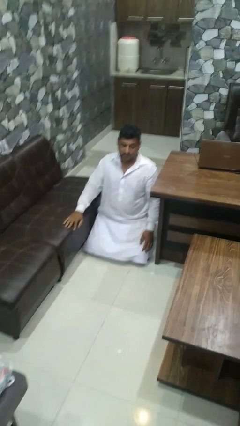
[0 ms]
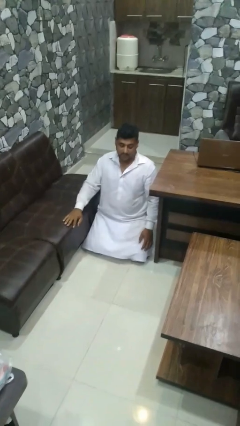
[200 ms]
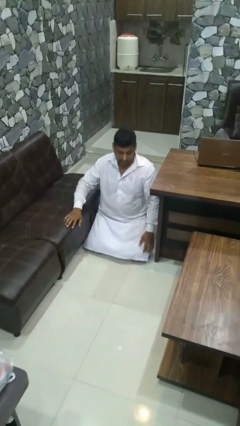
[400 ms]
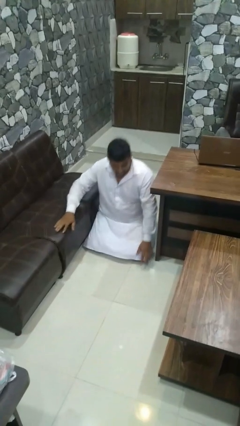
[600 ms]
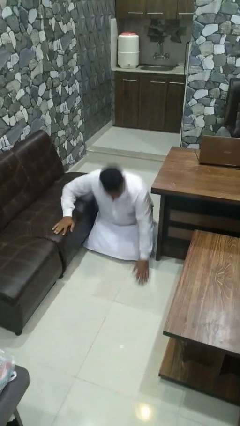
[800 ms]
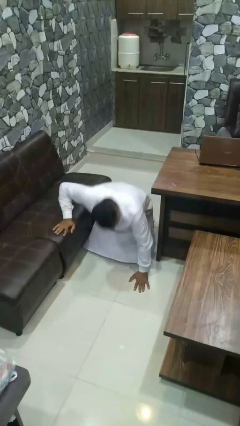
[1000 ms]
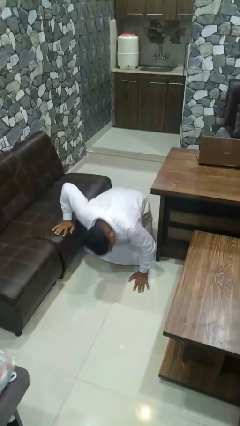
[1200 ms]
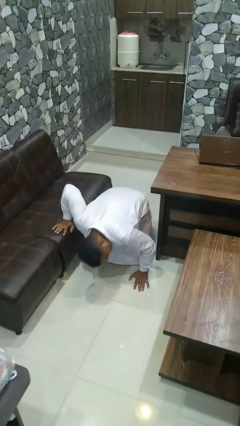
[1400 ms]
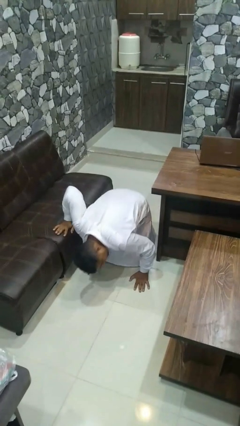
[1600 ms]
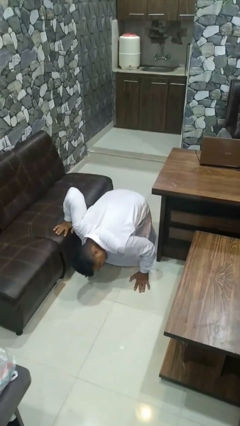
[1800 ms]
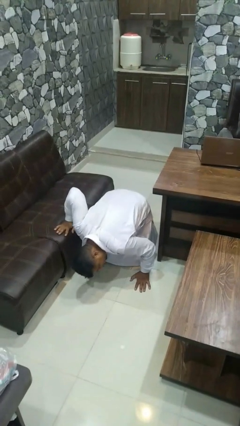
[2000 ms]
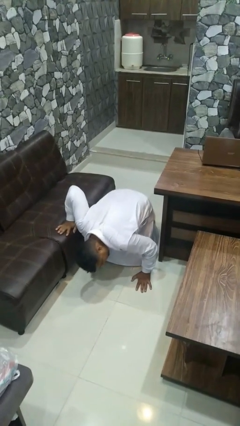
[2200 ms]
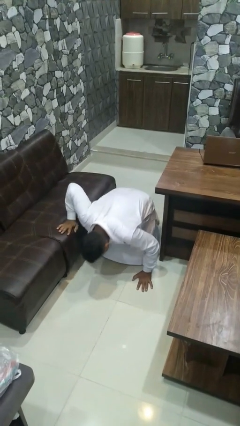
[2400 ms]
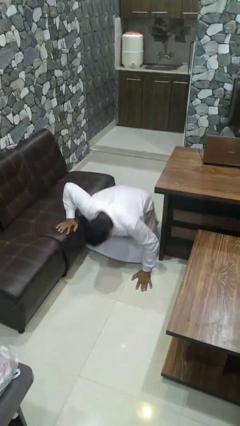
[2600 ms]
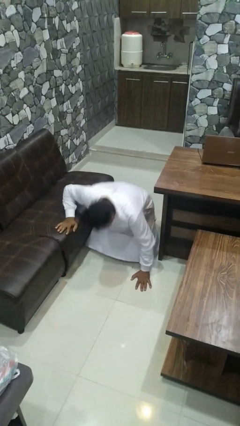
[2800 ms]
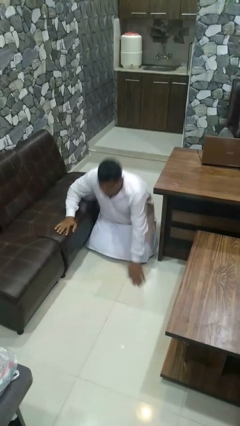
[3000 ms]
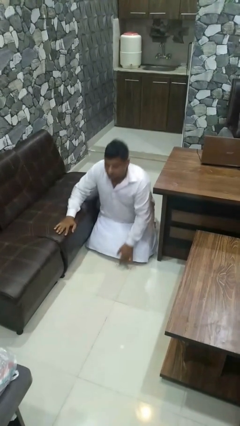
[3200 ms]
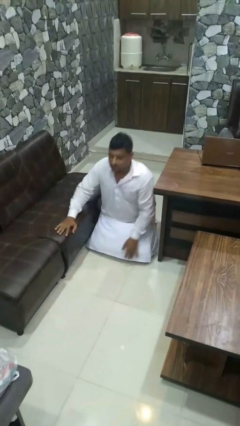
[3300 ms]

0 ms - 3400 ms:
person searches under couch

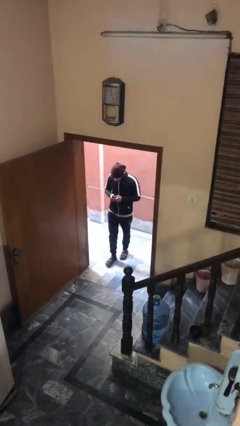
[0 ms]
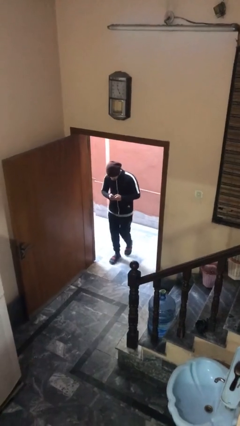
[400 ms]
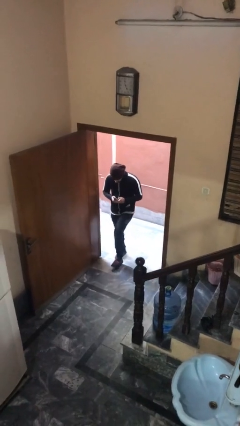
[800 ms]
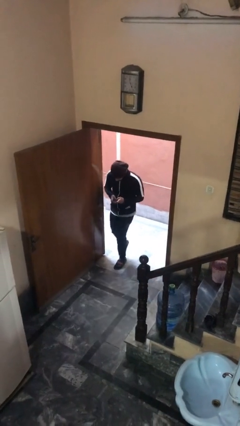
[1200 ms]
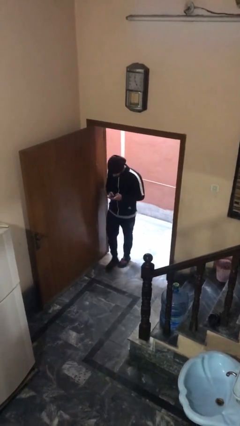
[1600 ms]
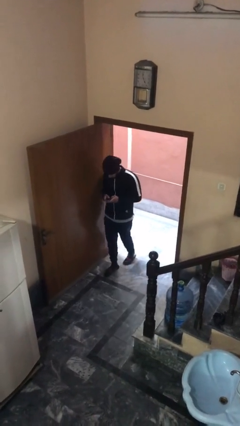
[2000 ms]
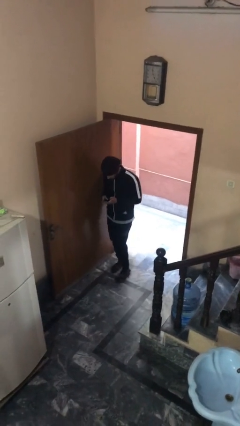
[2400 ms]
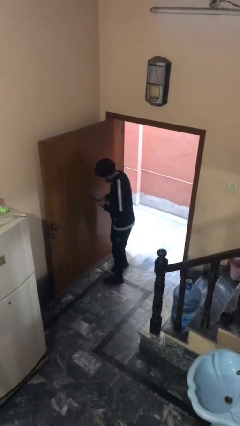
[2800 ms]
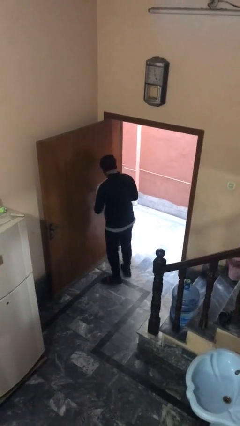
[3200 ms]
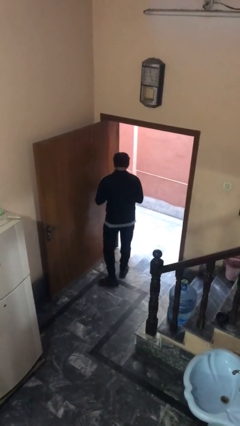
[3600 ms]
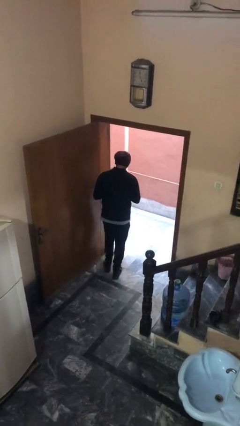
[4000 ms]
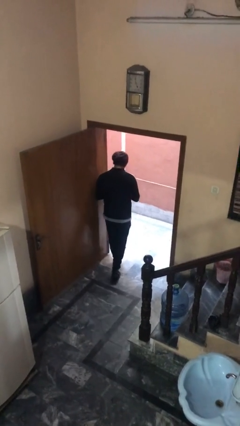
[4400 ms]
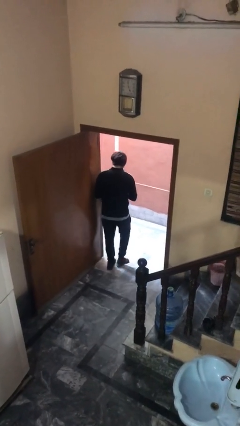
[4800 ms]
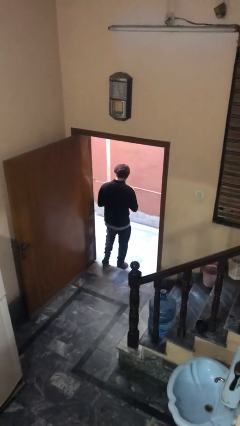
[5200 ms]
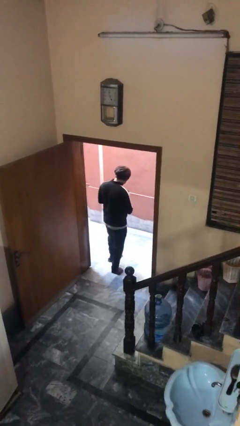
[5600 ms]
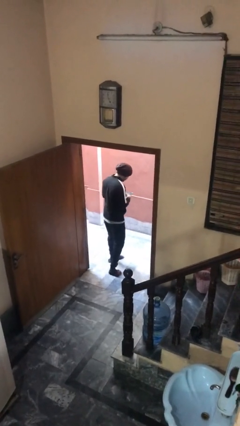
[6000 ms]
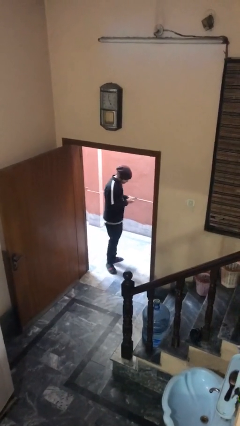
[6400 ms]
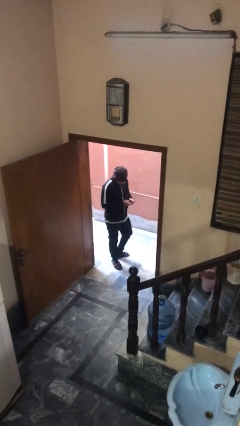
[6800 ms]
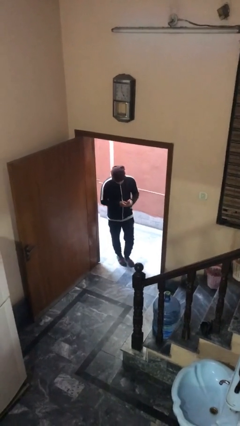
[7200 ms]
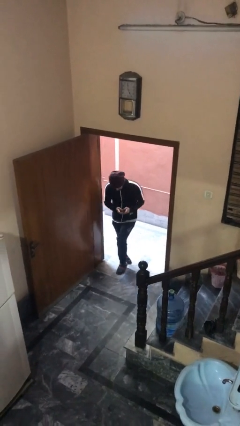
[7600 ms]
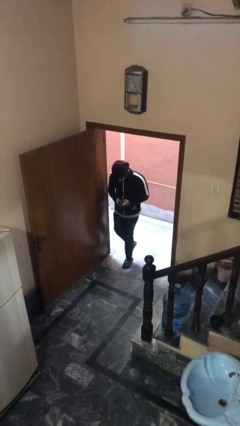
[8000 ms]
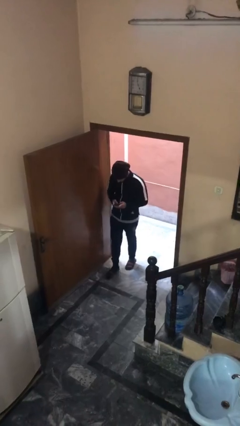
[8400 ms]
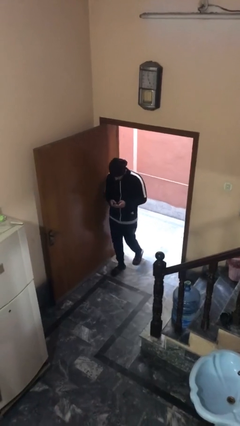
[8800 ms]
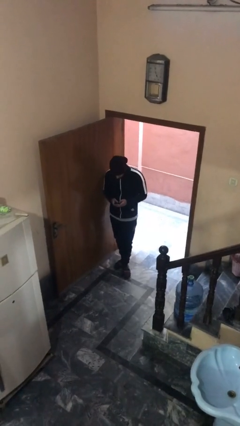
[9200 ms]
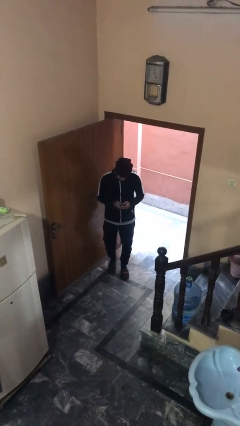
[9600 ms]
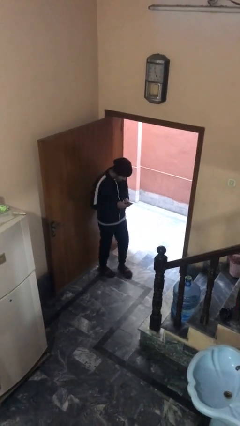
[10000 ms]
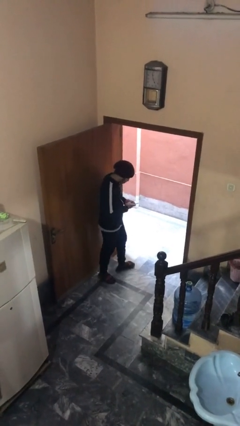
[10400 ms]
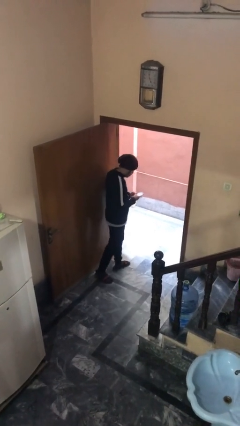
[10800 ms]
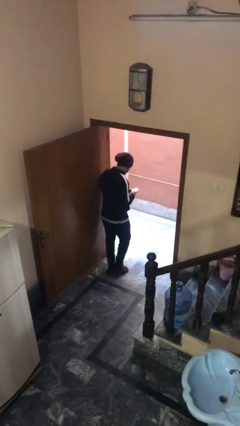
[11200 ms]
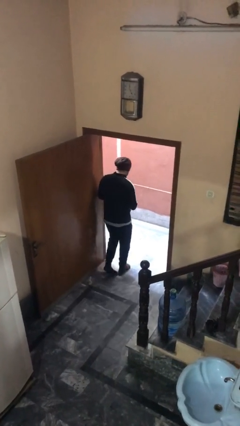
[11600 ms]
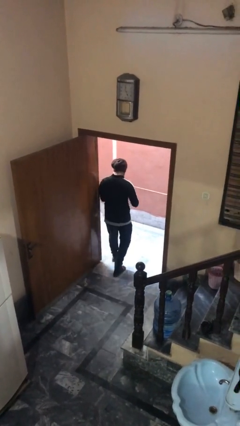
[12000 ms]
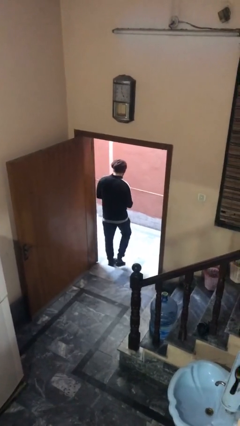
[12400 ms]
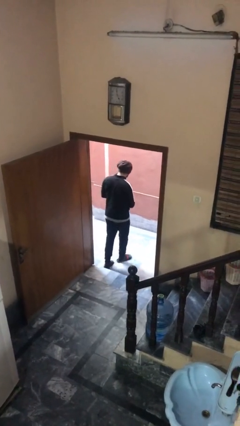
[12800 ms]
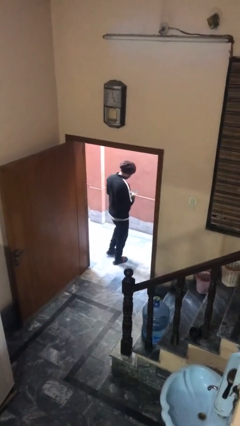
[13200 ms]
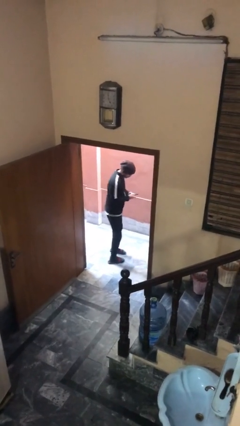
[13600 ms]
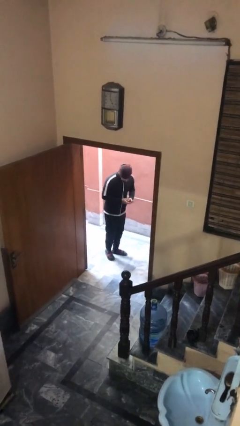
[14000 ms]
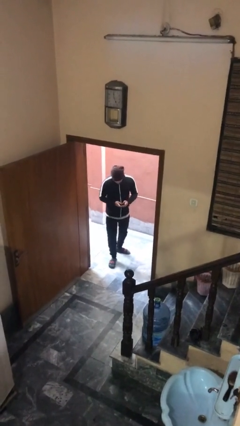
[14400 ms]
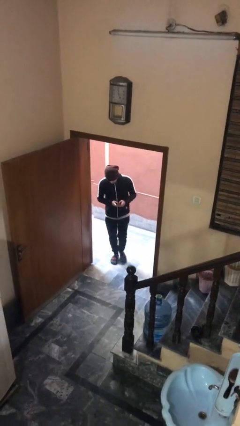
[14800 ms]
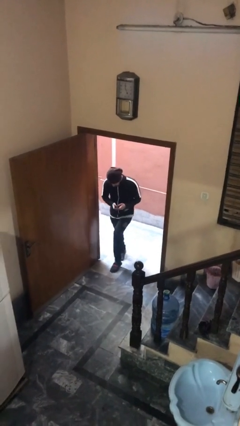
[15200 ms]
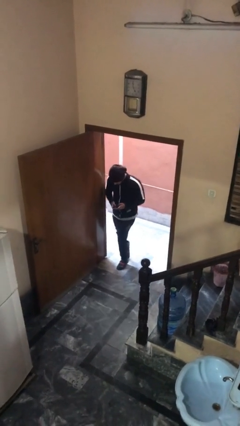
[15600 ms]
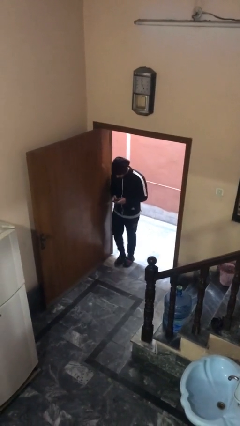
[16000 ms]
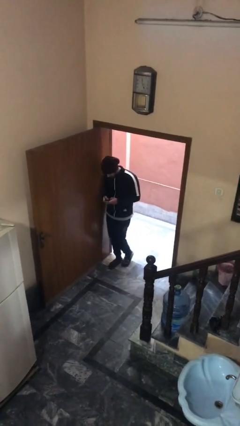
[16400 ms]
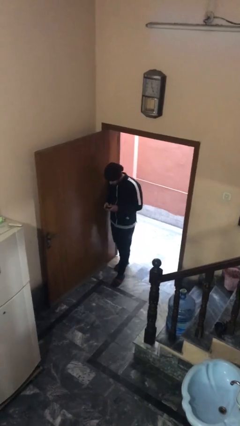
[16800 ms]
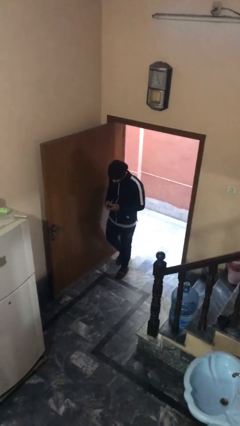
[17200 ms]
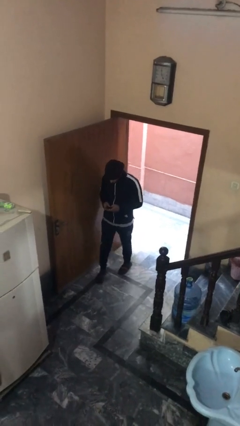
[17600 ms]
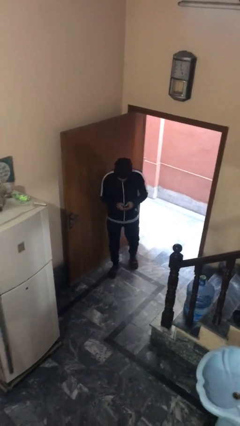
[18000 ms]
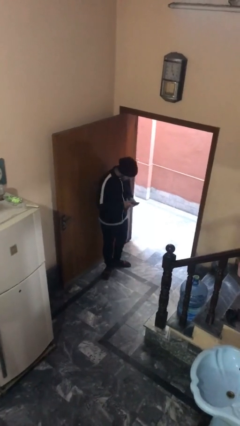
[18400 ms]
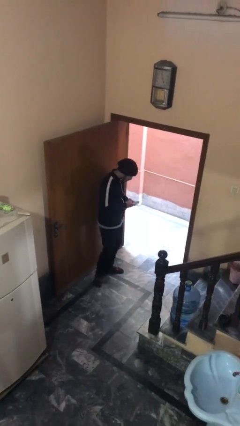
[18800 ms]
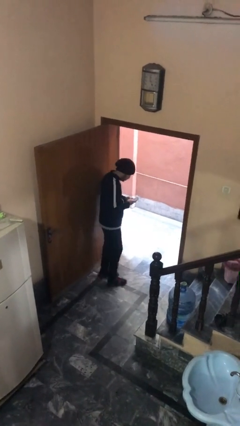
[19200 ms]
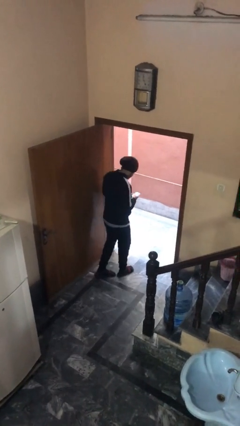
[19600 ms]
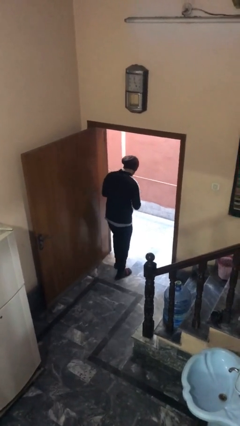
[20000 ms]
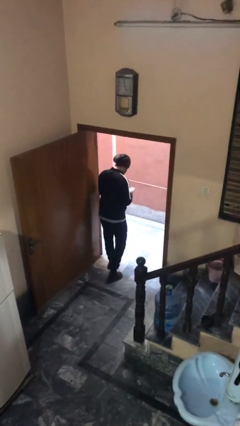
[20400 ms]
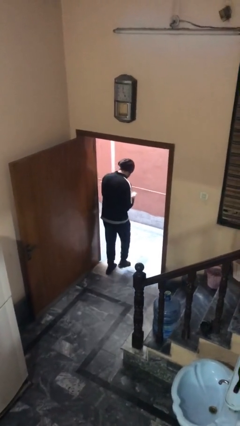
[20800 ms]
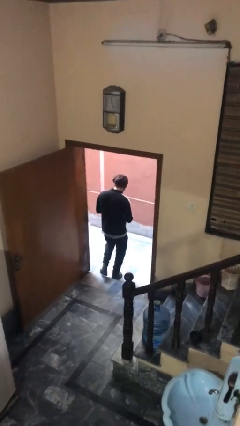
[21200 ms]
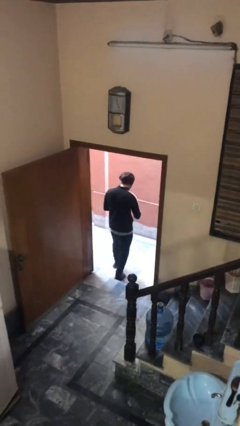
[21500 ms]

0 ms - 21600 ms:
person texts on phone

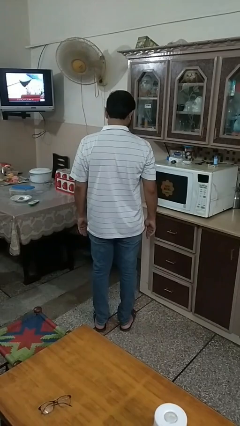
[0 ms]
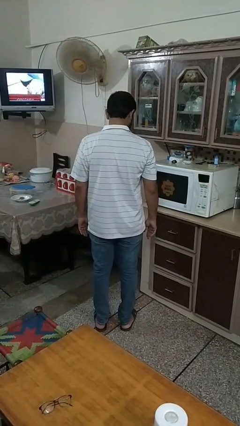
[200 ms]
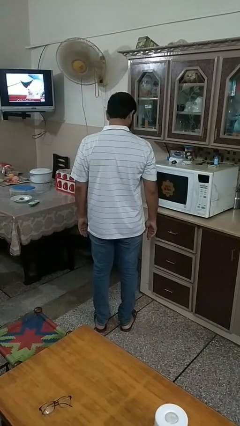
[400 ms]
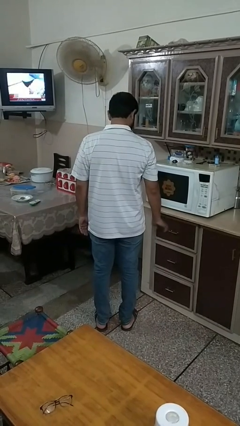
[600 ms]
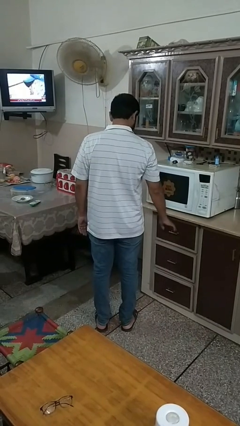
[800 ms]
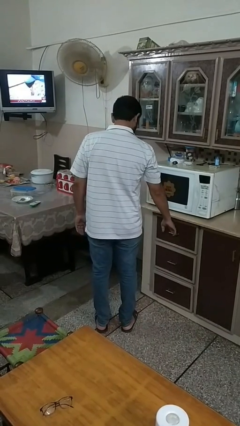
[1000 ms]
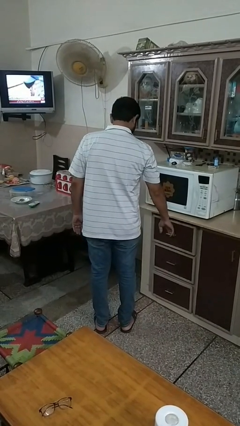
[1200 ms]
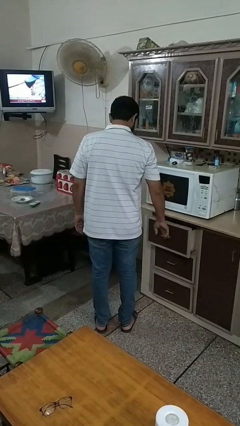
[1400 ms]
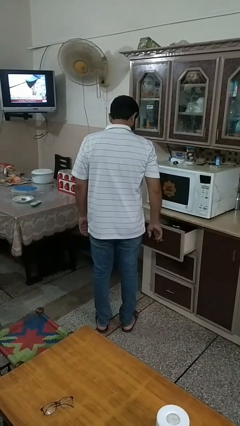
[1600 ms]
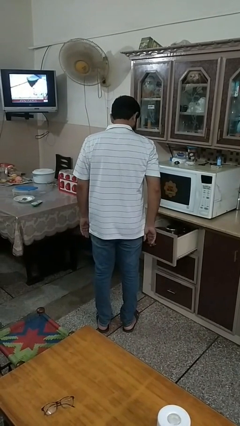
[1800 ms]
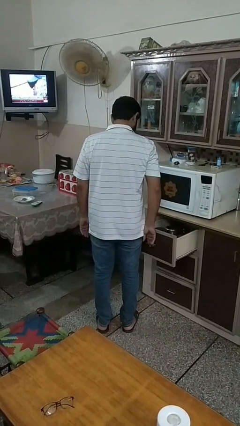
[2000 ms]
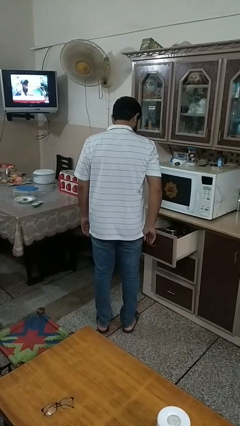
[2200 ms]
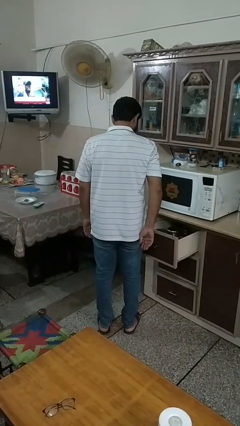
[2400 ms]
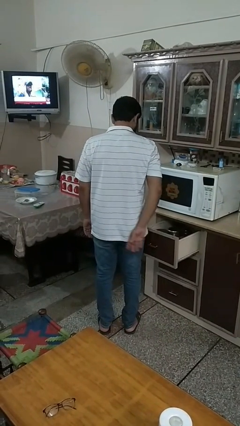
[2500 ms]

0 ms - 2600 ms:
person opens kitchen drawer

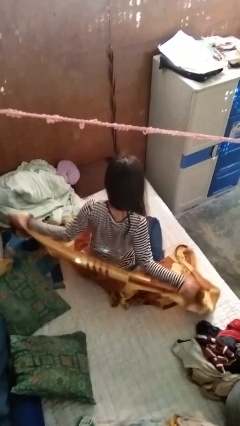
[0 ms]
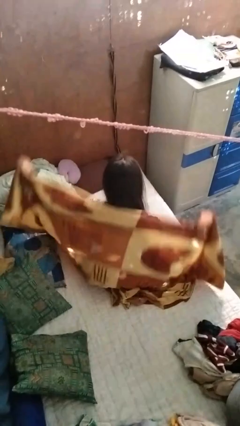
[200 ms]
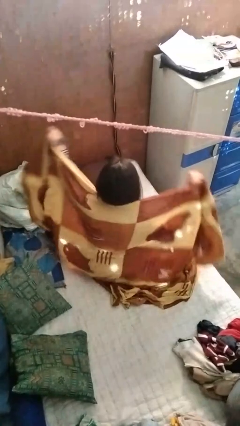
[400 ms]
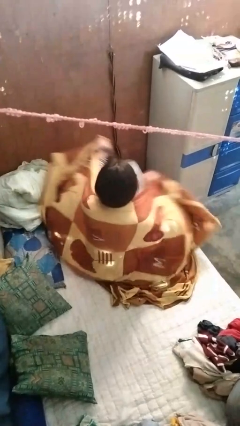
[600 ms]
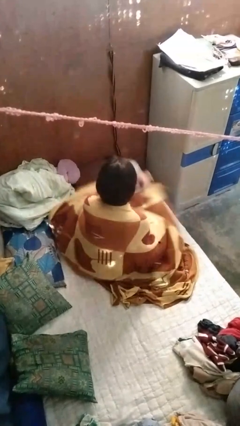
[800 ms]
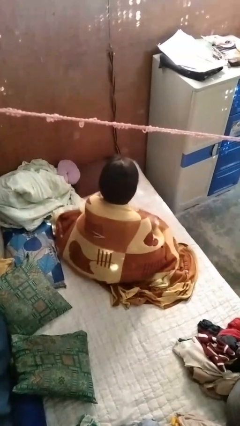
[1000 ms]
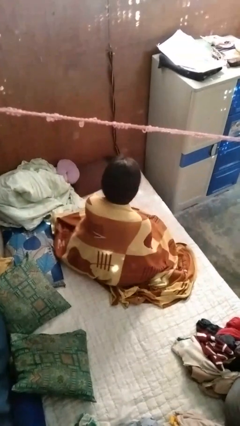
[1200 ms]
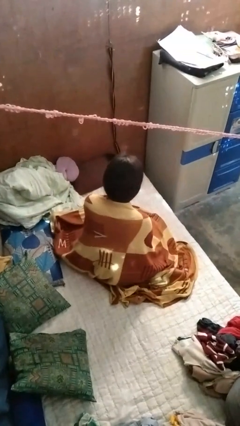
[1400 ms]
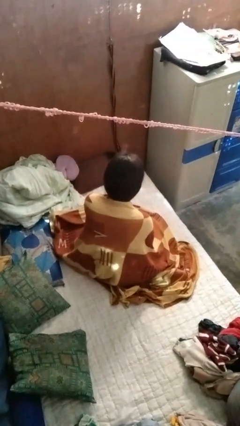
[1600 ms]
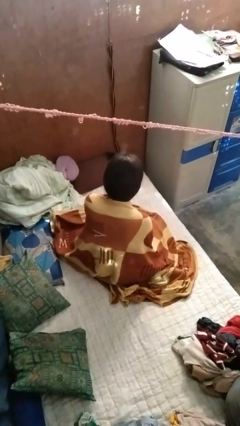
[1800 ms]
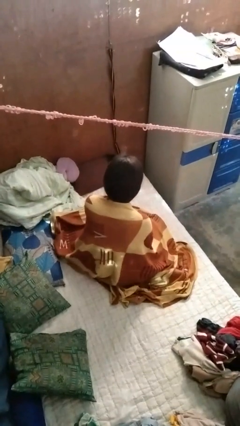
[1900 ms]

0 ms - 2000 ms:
person covers with blanket
